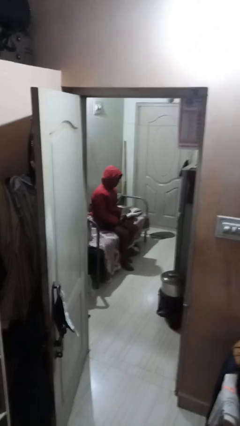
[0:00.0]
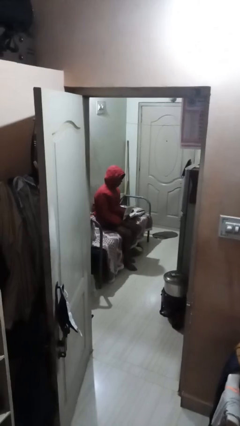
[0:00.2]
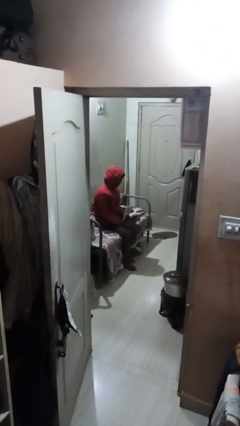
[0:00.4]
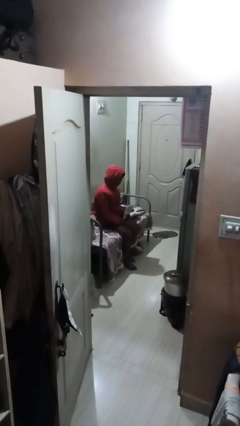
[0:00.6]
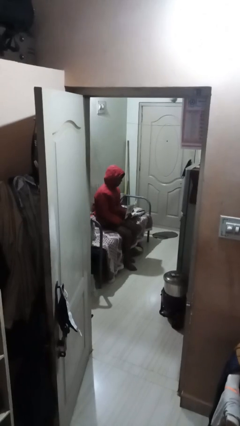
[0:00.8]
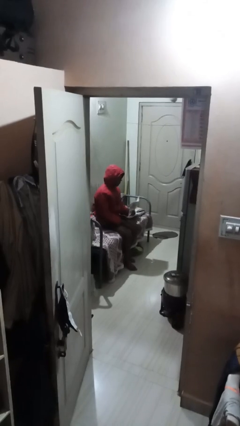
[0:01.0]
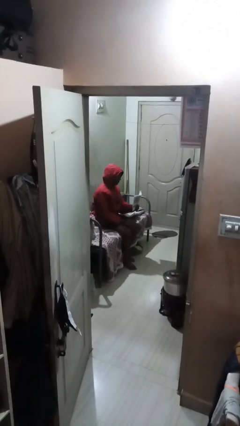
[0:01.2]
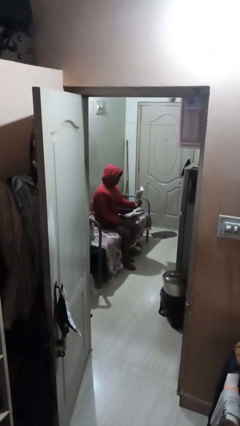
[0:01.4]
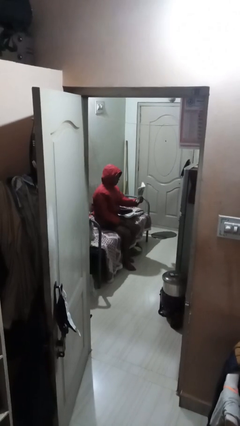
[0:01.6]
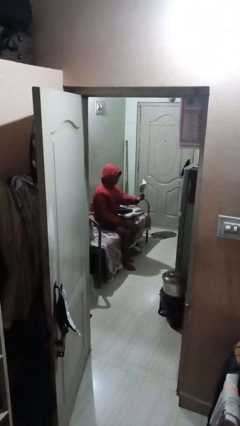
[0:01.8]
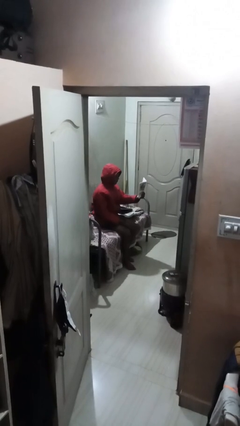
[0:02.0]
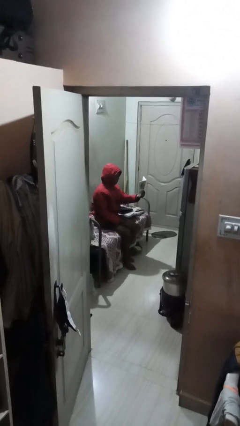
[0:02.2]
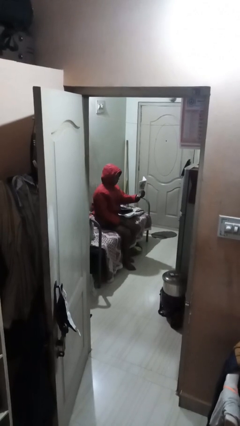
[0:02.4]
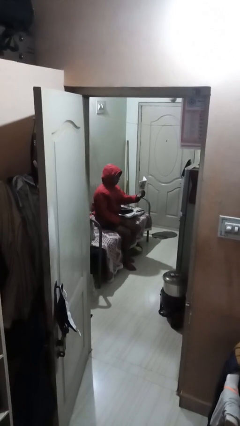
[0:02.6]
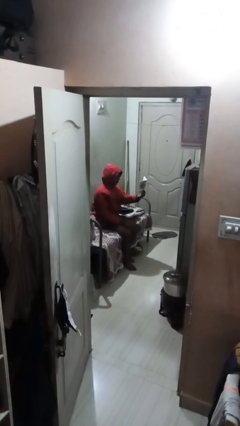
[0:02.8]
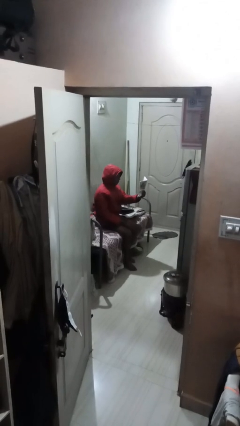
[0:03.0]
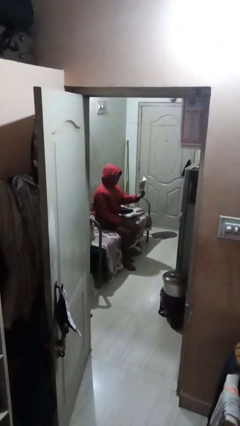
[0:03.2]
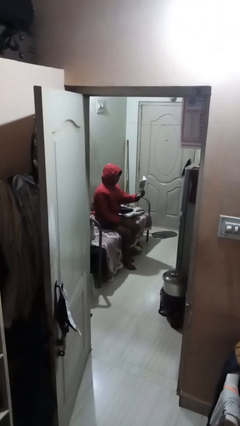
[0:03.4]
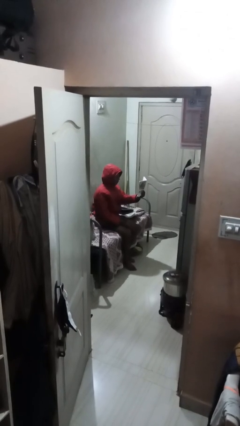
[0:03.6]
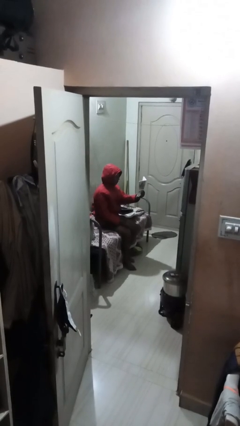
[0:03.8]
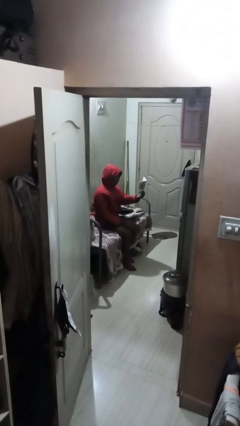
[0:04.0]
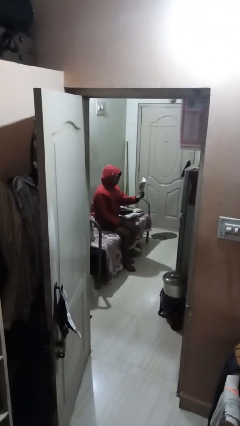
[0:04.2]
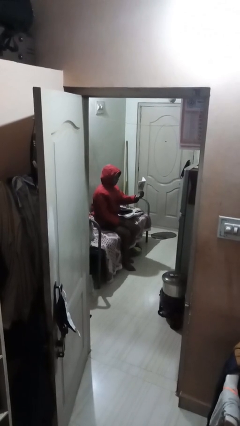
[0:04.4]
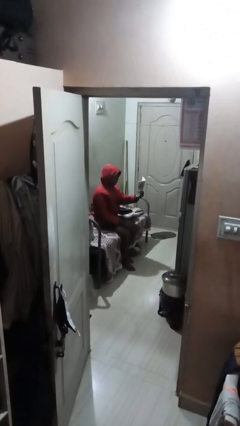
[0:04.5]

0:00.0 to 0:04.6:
person reads document

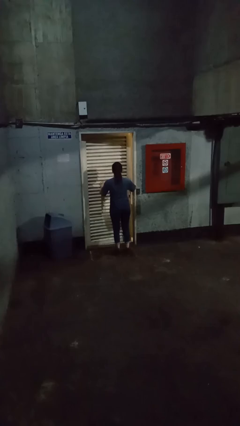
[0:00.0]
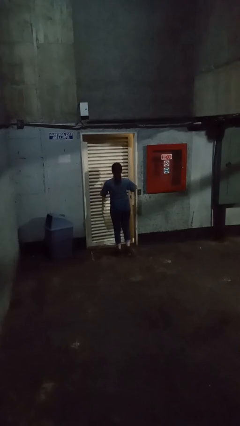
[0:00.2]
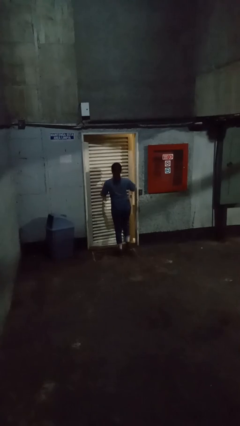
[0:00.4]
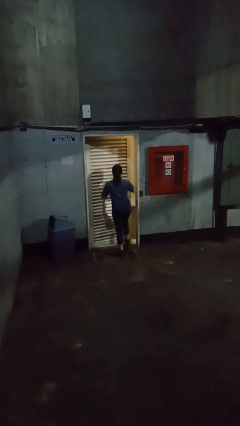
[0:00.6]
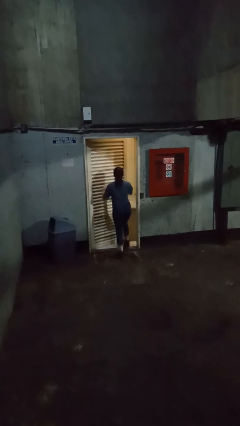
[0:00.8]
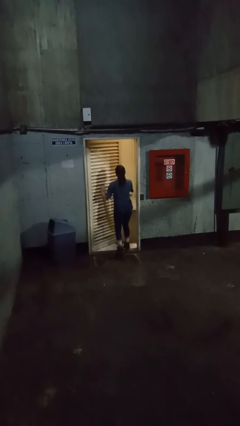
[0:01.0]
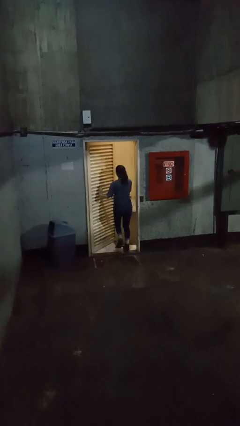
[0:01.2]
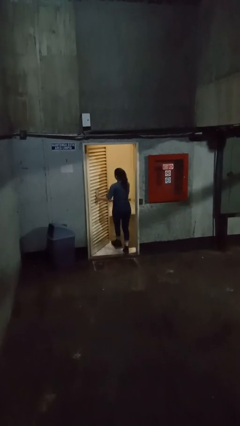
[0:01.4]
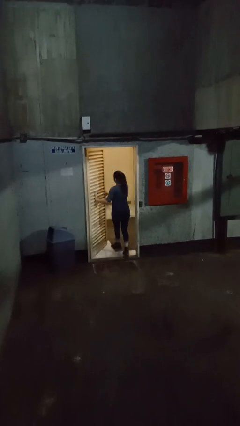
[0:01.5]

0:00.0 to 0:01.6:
person opens facility door

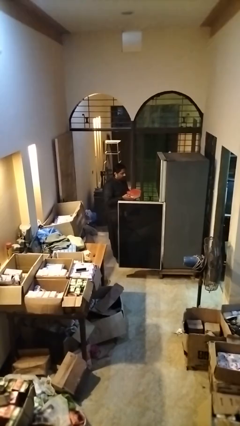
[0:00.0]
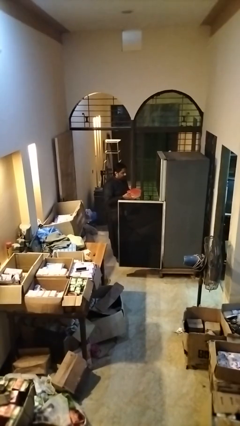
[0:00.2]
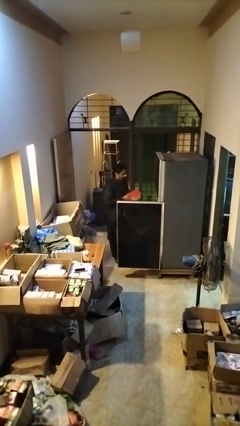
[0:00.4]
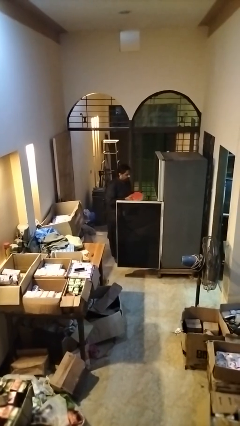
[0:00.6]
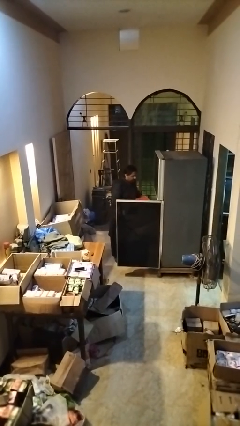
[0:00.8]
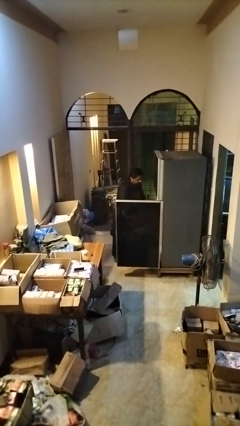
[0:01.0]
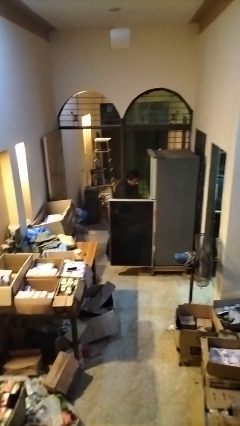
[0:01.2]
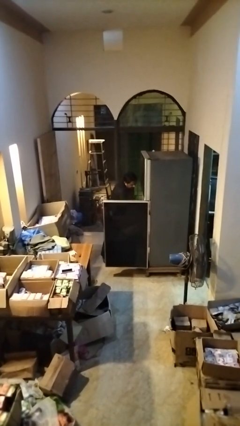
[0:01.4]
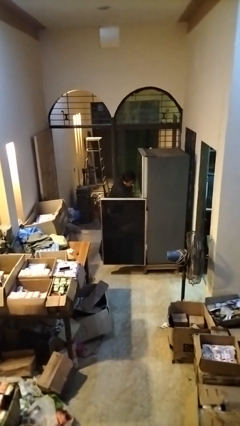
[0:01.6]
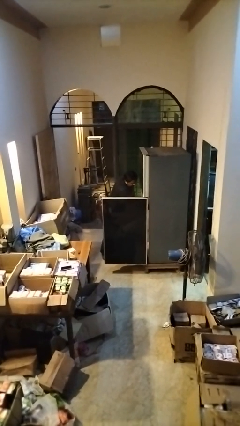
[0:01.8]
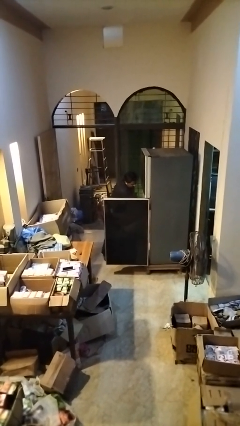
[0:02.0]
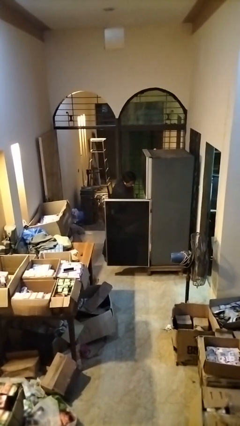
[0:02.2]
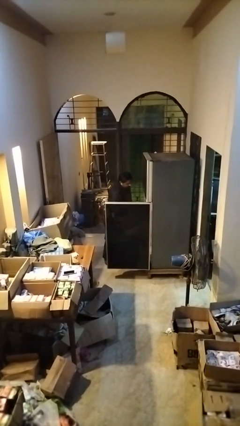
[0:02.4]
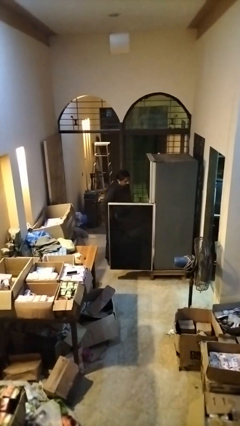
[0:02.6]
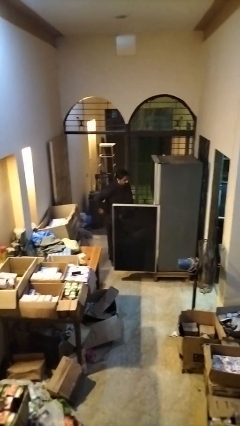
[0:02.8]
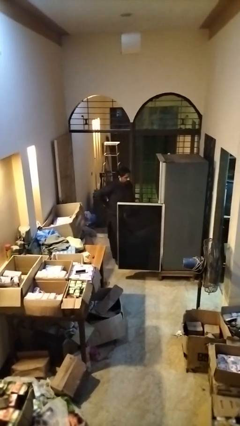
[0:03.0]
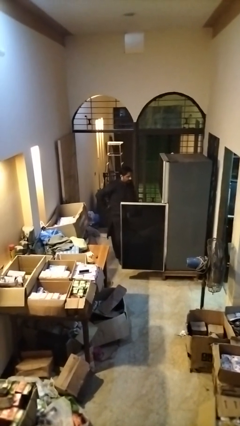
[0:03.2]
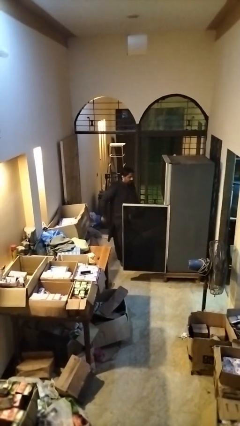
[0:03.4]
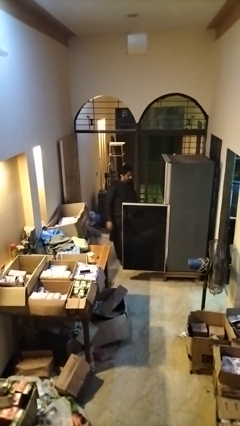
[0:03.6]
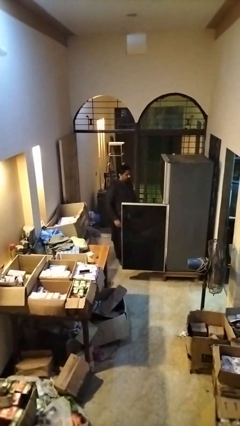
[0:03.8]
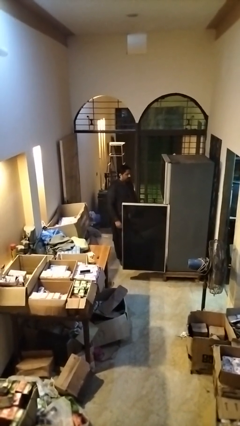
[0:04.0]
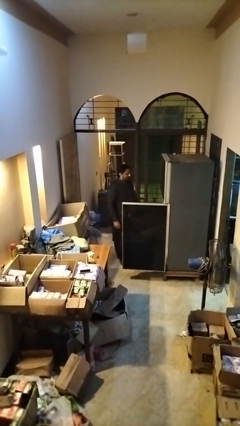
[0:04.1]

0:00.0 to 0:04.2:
person takes object from refrigerator

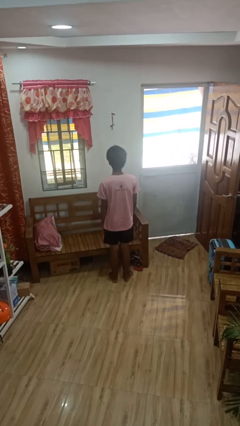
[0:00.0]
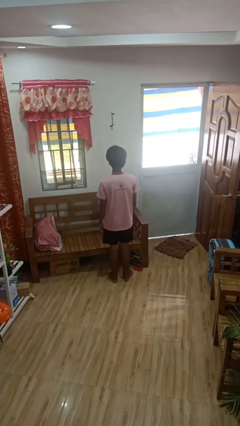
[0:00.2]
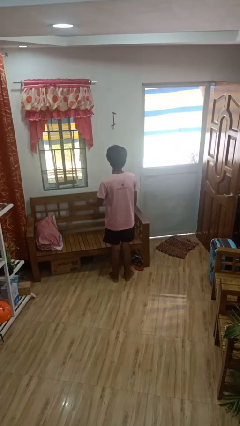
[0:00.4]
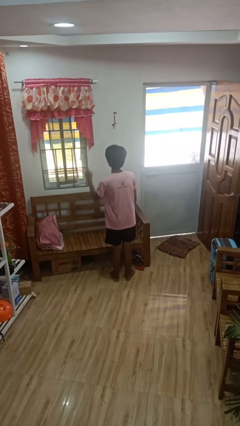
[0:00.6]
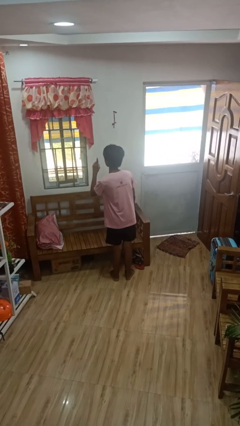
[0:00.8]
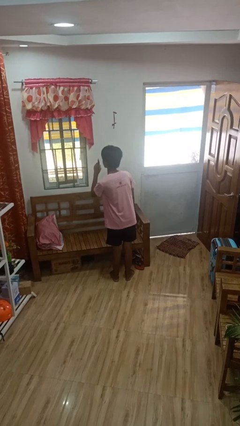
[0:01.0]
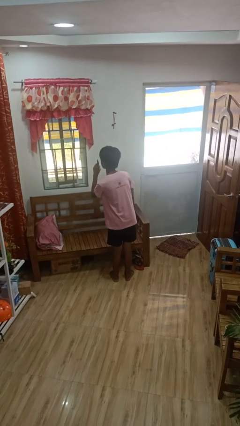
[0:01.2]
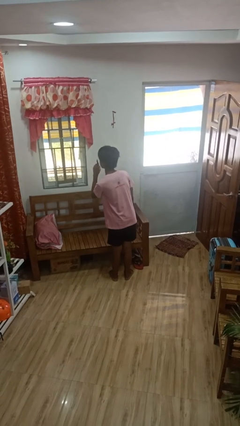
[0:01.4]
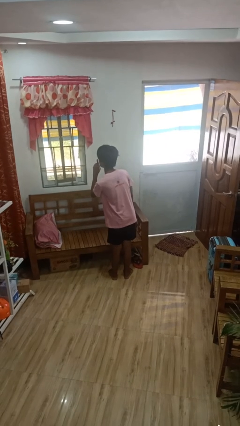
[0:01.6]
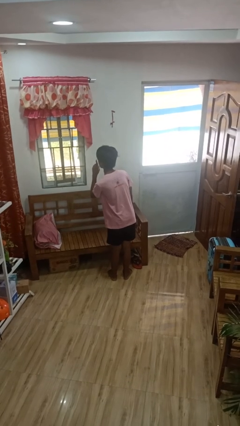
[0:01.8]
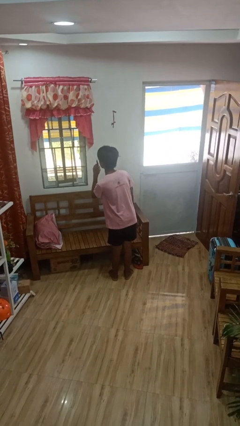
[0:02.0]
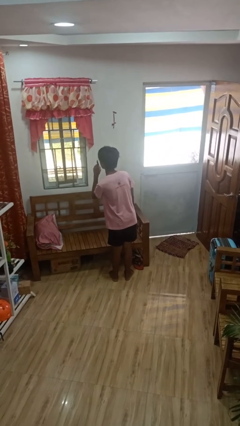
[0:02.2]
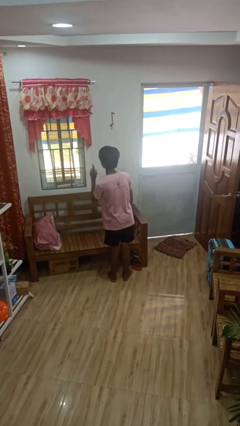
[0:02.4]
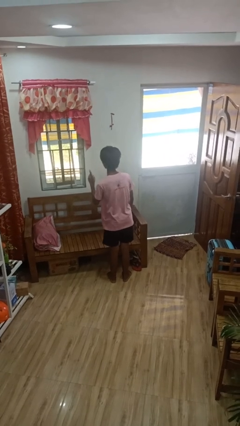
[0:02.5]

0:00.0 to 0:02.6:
person gestures be quiet

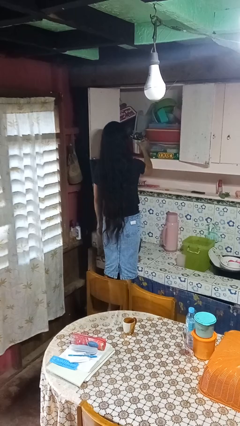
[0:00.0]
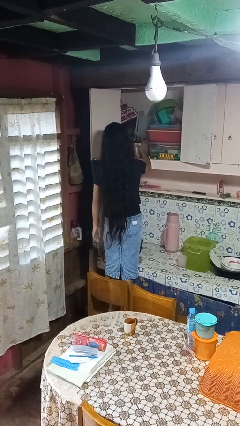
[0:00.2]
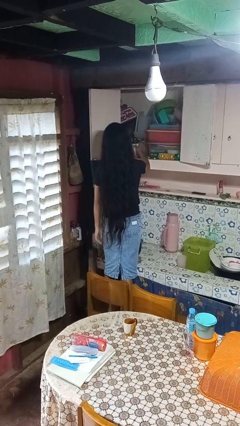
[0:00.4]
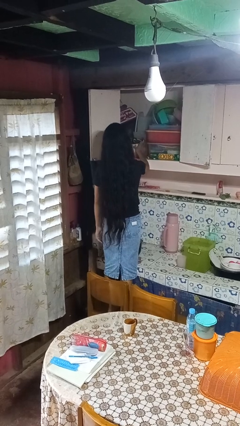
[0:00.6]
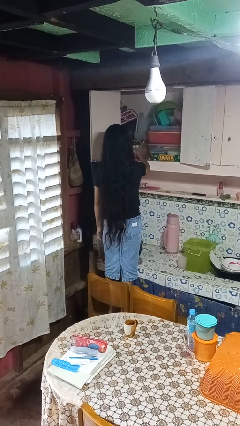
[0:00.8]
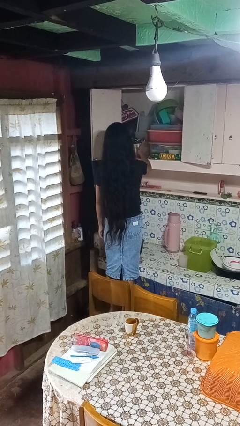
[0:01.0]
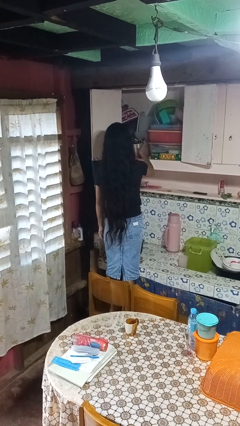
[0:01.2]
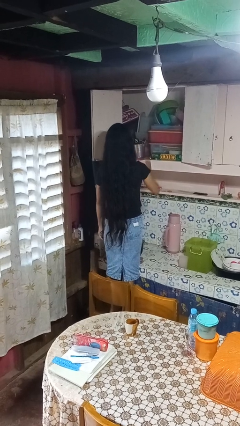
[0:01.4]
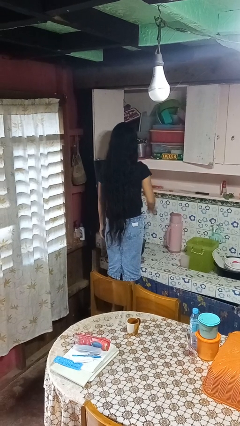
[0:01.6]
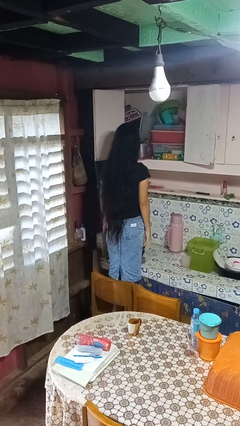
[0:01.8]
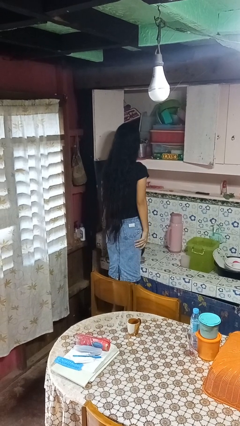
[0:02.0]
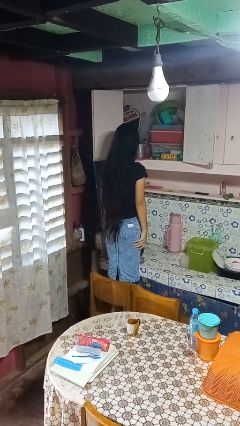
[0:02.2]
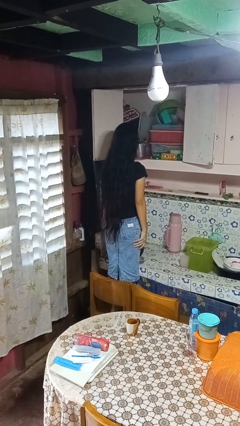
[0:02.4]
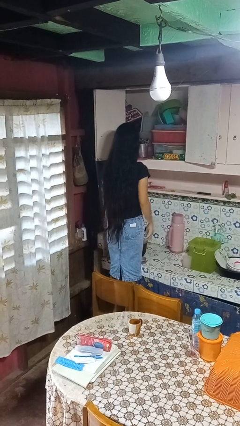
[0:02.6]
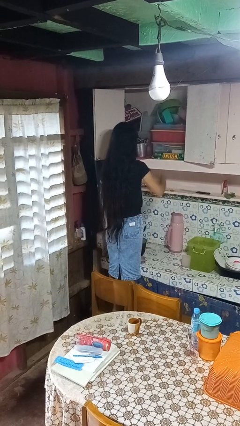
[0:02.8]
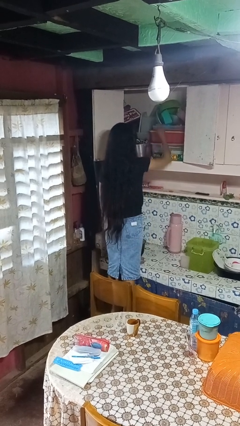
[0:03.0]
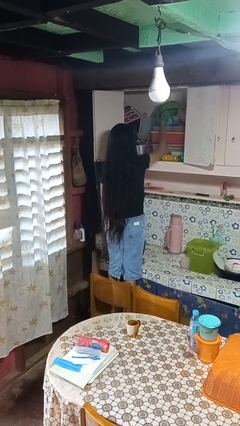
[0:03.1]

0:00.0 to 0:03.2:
person puts object in cabinet

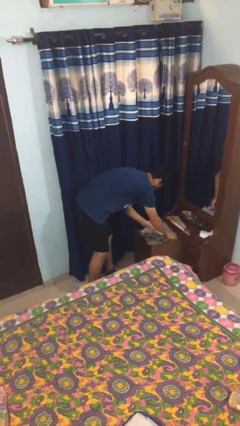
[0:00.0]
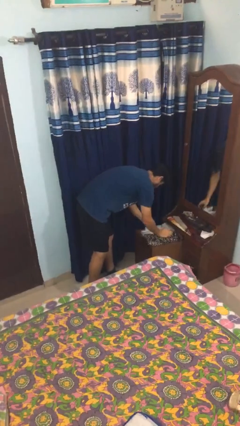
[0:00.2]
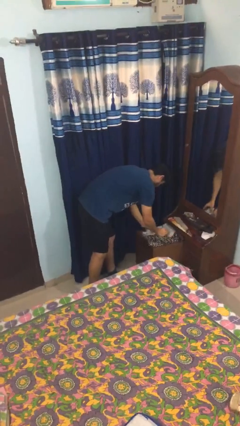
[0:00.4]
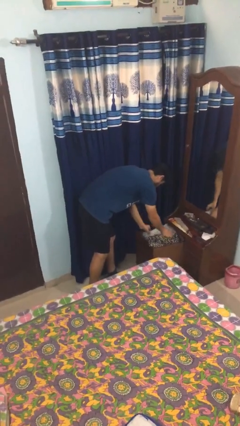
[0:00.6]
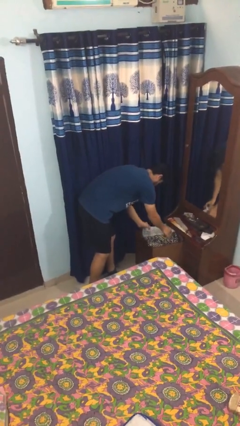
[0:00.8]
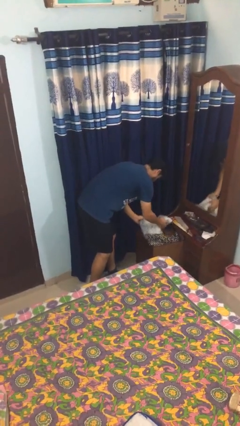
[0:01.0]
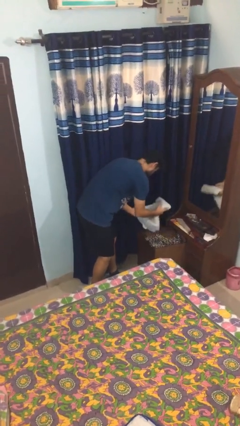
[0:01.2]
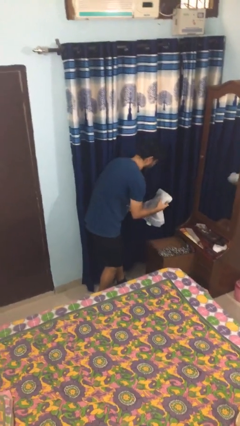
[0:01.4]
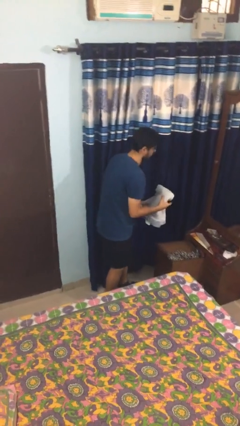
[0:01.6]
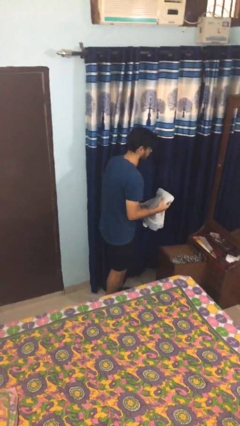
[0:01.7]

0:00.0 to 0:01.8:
person takes clothes from dresser
